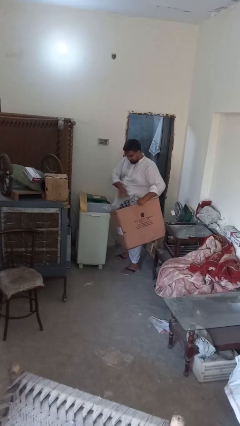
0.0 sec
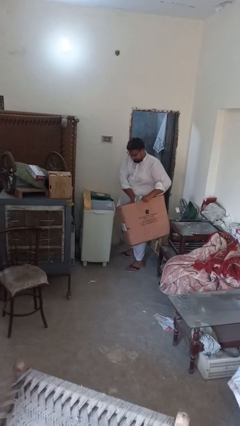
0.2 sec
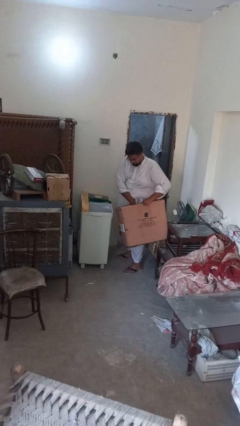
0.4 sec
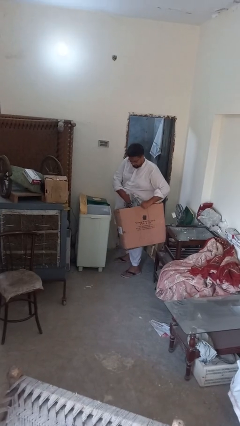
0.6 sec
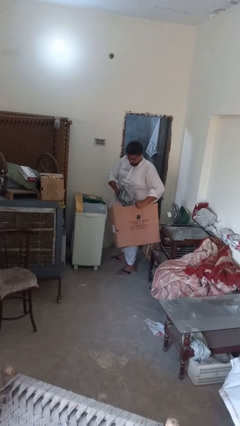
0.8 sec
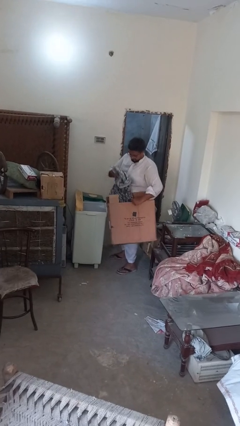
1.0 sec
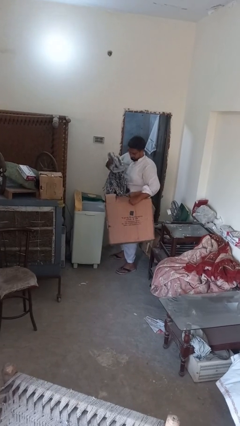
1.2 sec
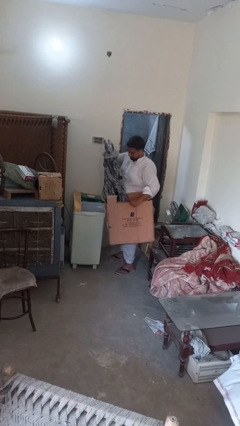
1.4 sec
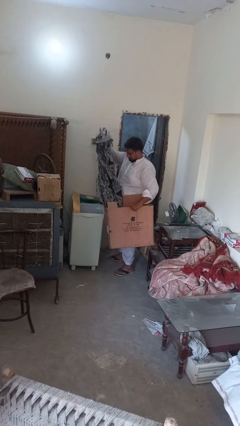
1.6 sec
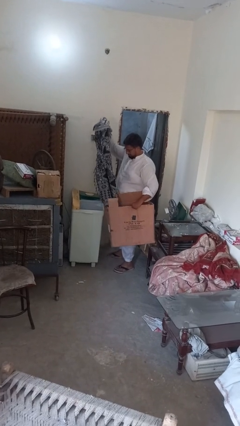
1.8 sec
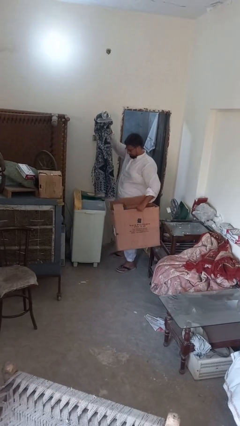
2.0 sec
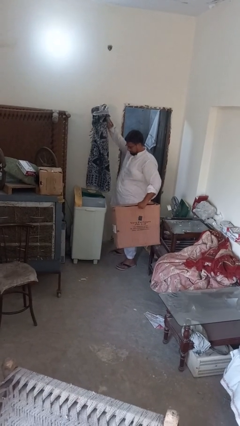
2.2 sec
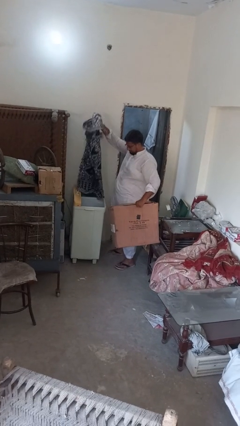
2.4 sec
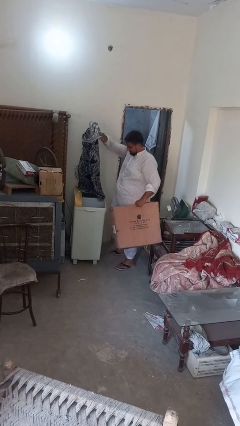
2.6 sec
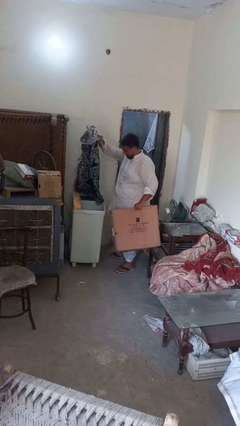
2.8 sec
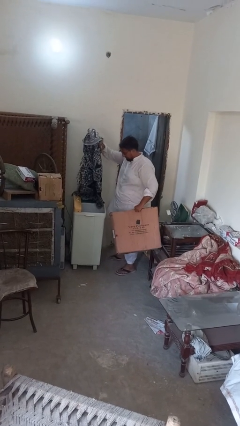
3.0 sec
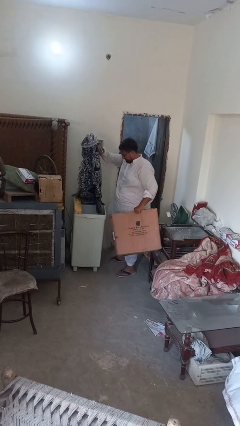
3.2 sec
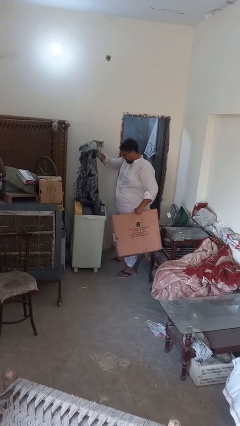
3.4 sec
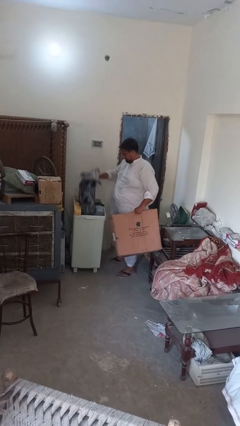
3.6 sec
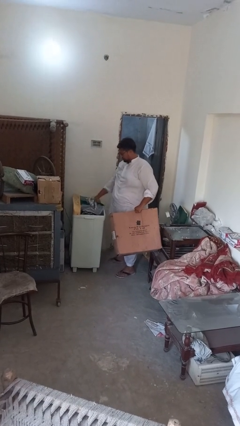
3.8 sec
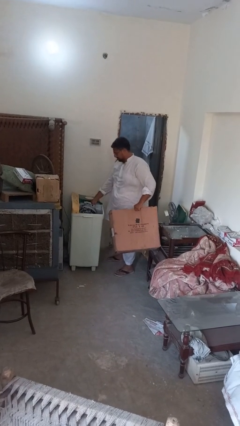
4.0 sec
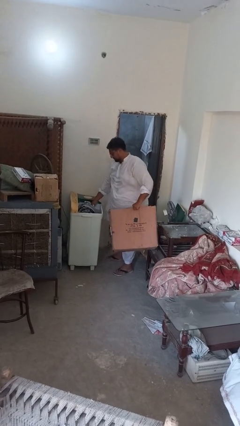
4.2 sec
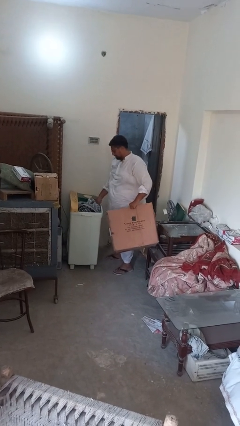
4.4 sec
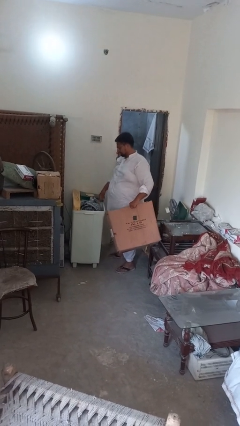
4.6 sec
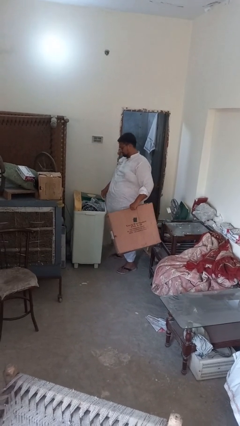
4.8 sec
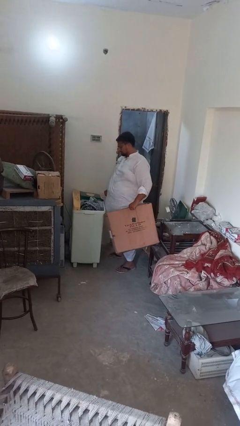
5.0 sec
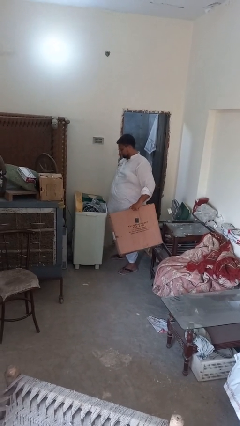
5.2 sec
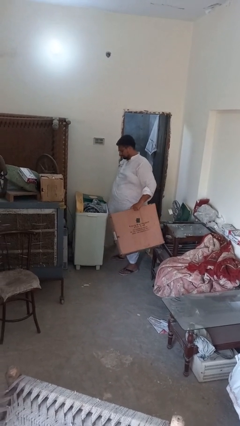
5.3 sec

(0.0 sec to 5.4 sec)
person loads dryer

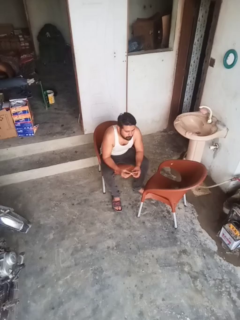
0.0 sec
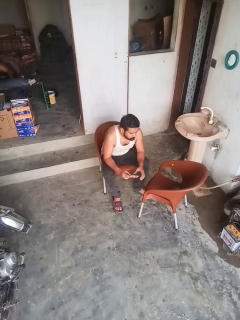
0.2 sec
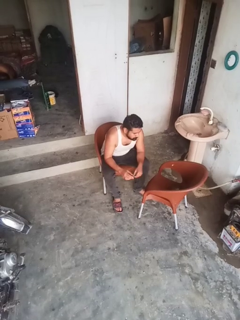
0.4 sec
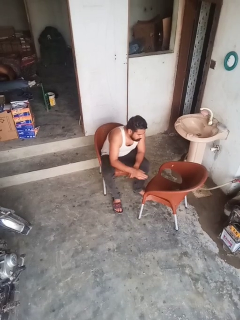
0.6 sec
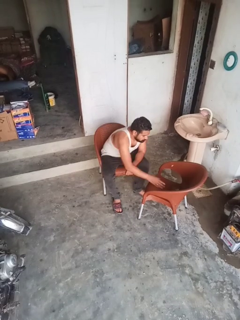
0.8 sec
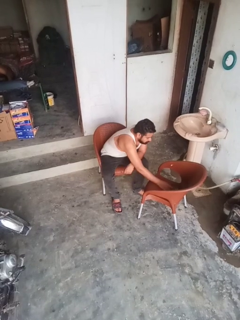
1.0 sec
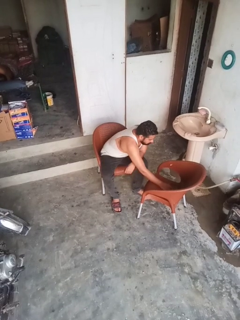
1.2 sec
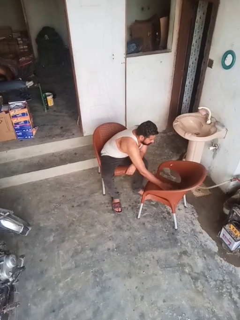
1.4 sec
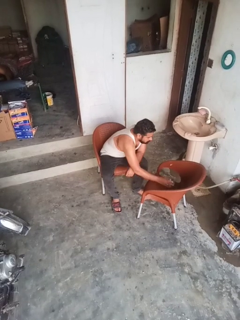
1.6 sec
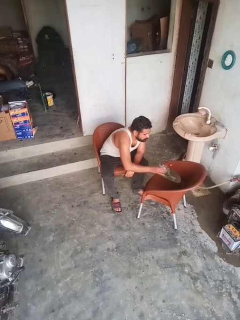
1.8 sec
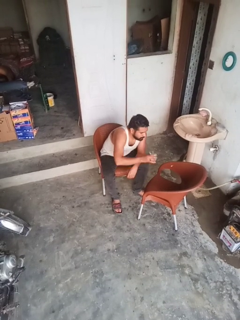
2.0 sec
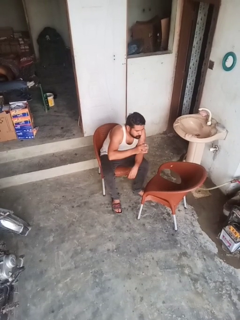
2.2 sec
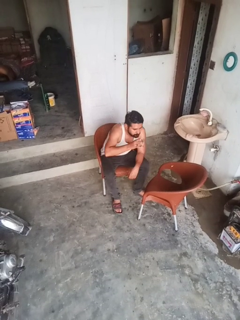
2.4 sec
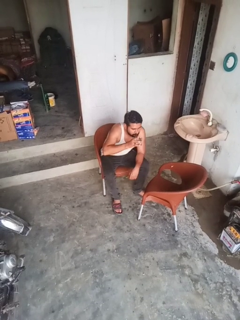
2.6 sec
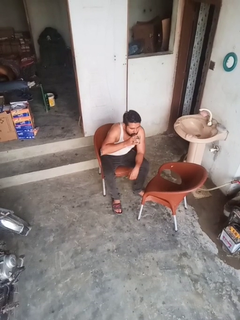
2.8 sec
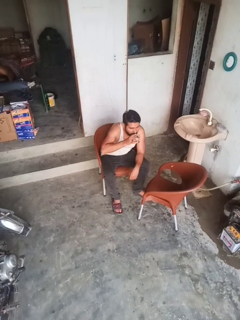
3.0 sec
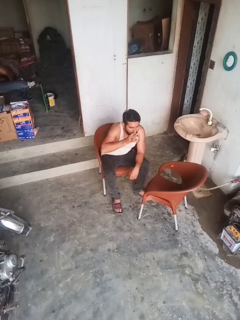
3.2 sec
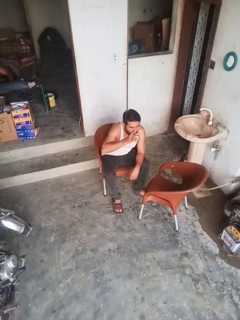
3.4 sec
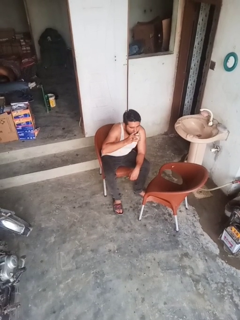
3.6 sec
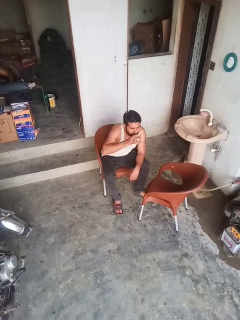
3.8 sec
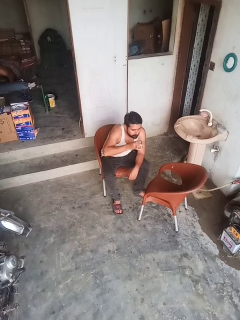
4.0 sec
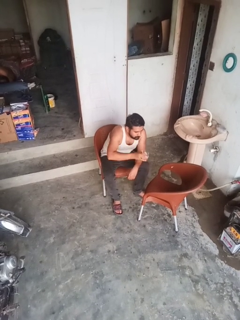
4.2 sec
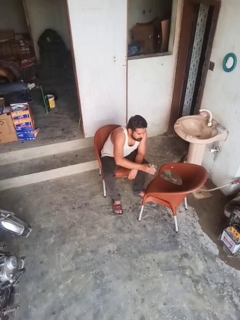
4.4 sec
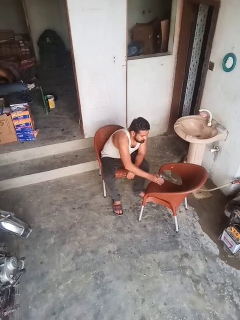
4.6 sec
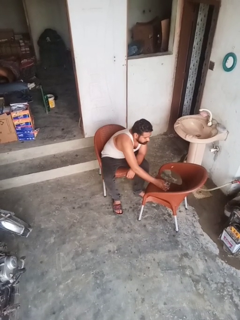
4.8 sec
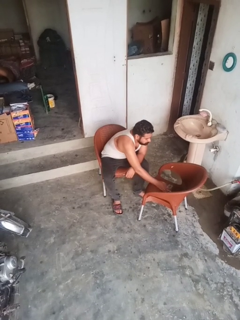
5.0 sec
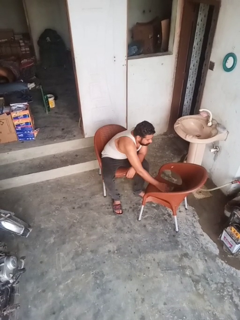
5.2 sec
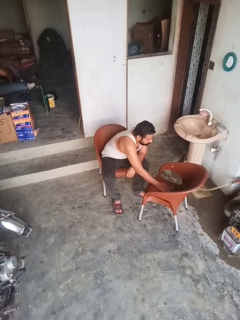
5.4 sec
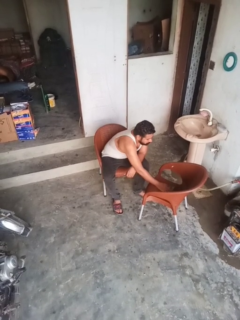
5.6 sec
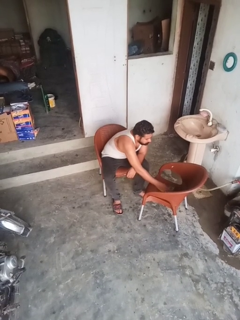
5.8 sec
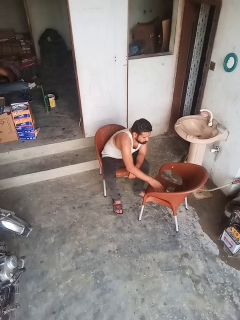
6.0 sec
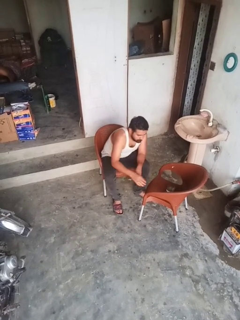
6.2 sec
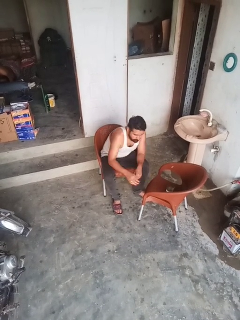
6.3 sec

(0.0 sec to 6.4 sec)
person drinks from cup

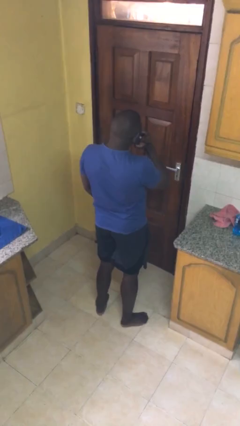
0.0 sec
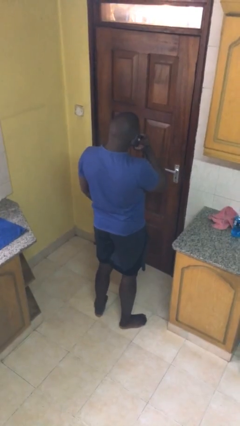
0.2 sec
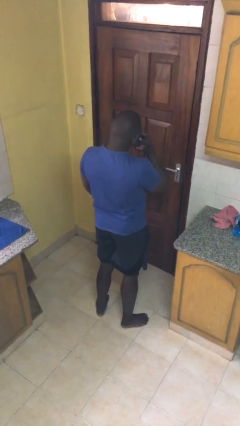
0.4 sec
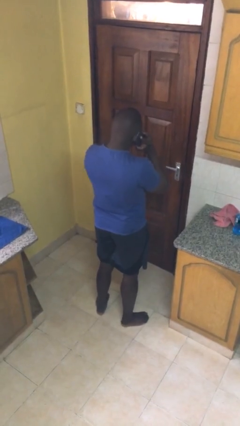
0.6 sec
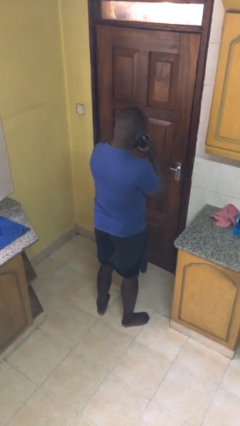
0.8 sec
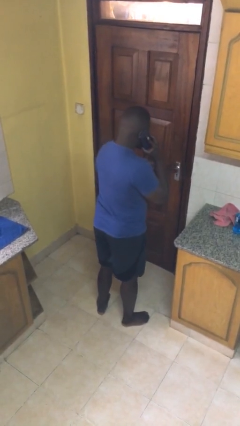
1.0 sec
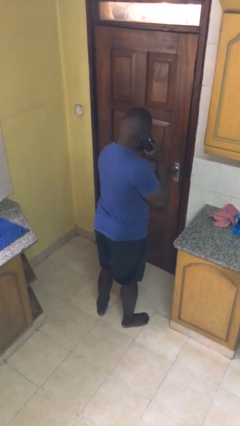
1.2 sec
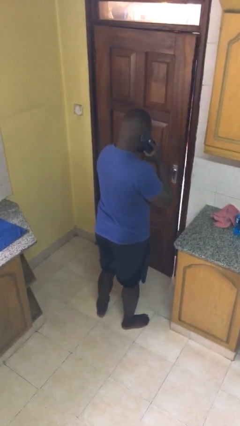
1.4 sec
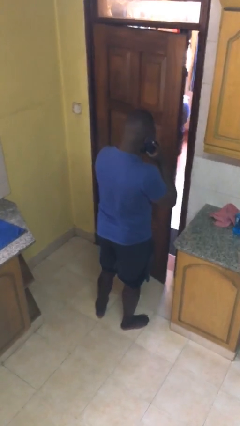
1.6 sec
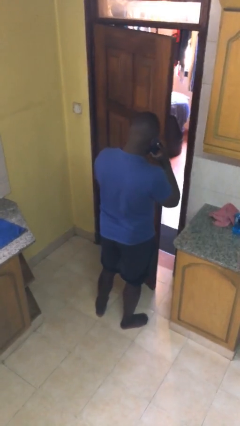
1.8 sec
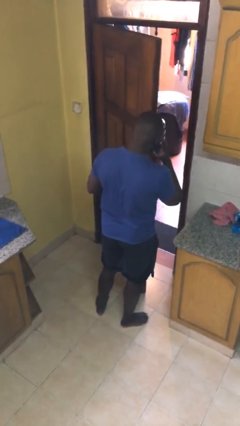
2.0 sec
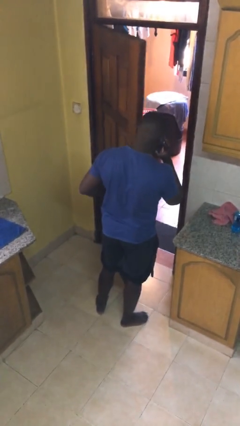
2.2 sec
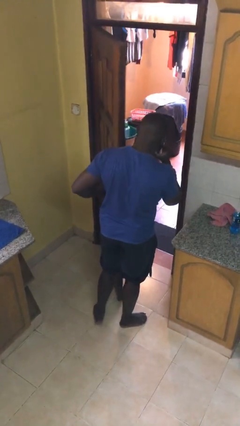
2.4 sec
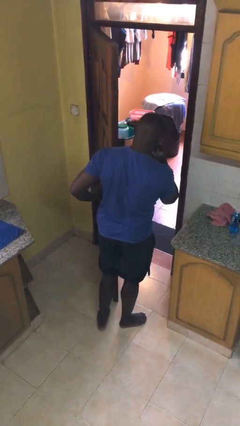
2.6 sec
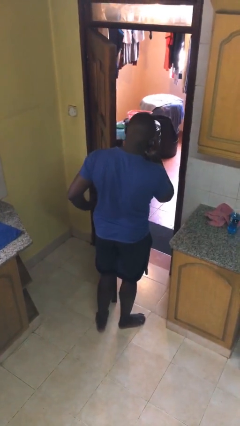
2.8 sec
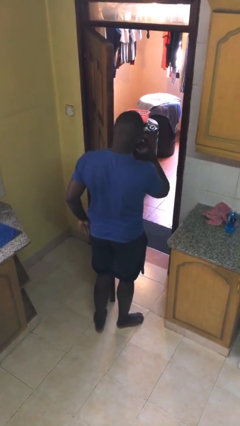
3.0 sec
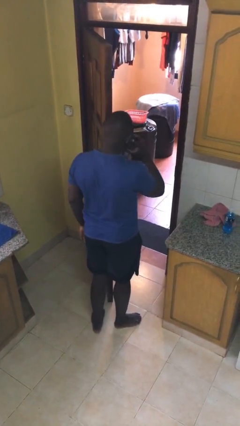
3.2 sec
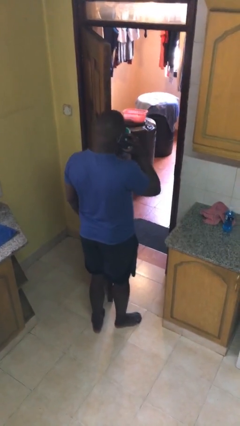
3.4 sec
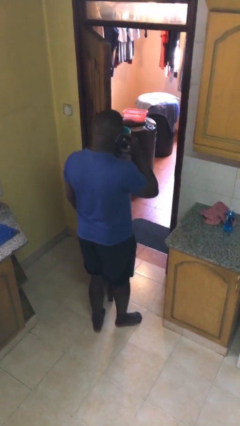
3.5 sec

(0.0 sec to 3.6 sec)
person opens facility door

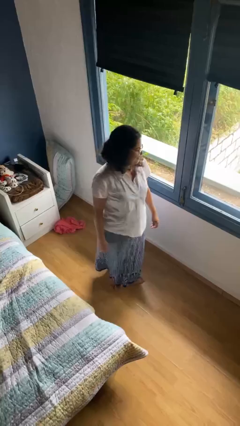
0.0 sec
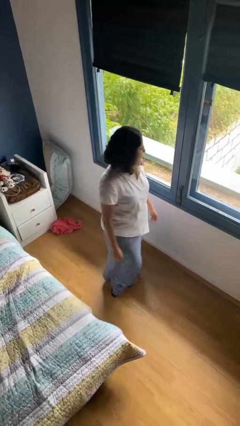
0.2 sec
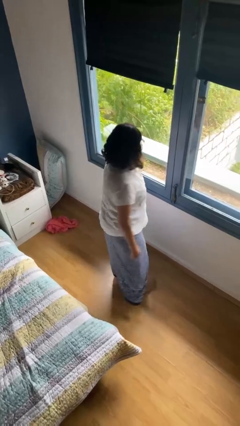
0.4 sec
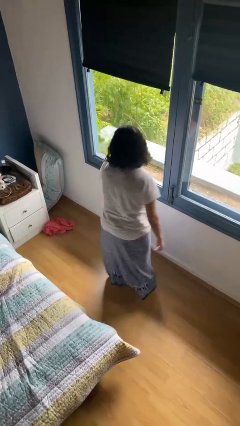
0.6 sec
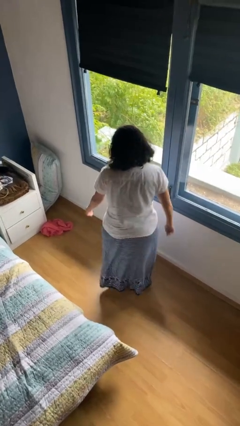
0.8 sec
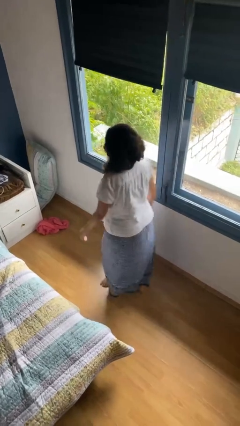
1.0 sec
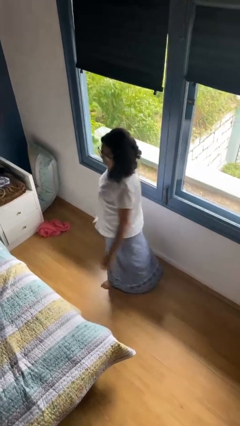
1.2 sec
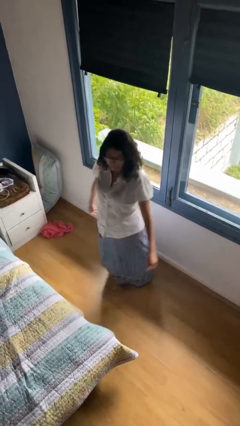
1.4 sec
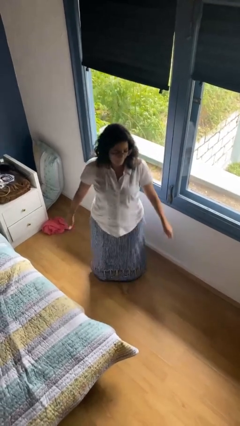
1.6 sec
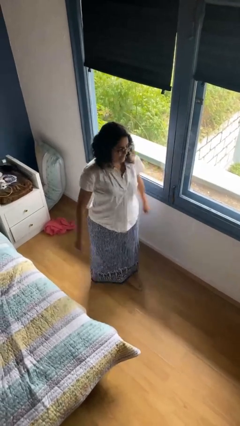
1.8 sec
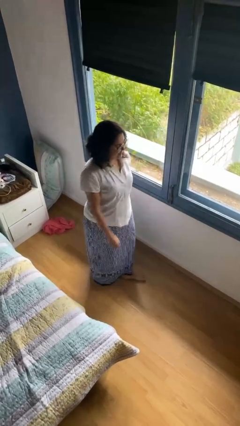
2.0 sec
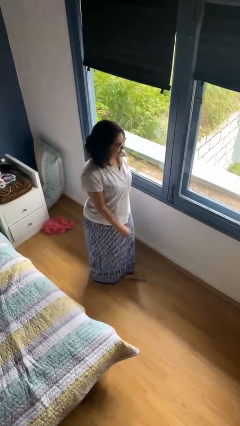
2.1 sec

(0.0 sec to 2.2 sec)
person twirls

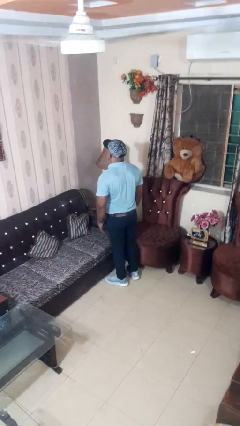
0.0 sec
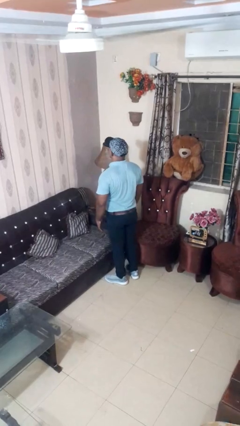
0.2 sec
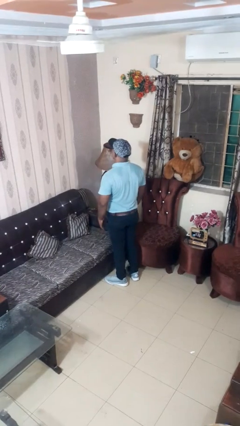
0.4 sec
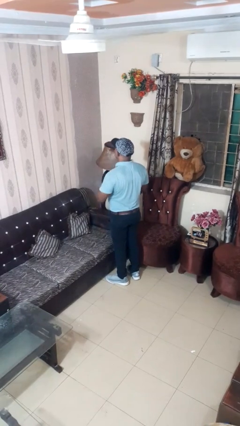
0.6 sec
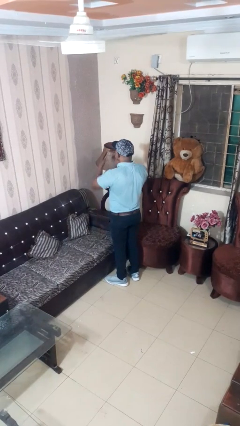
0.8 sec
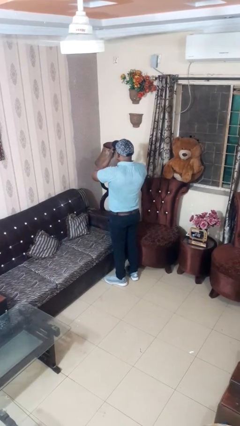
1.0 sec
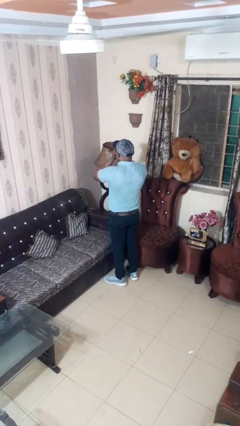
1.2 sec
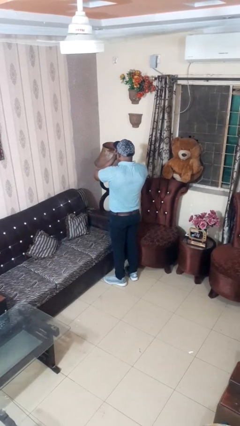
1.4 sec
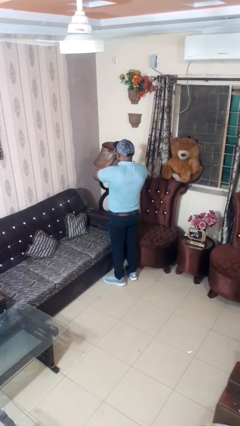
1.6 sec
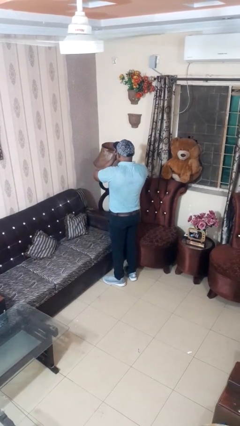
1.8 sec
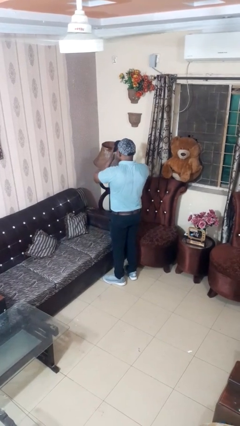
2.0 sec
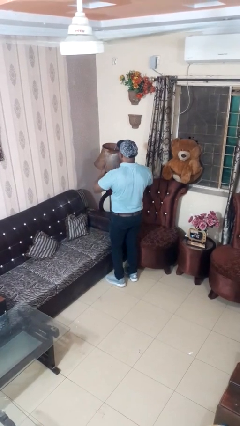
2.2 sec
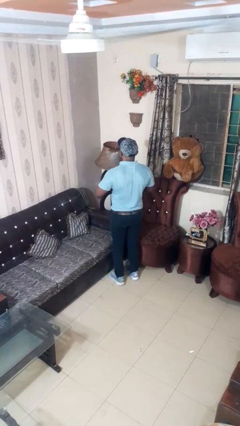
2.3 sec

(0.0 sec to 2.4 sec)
person covers face with hands
